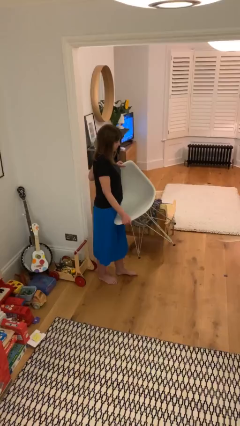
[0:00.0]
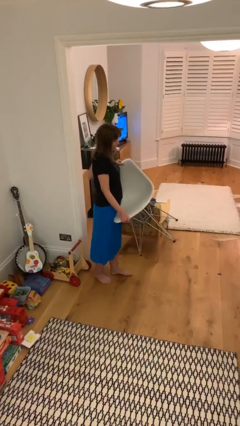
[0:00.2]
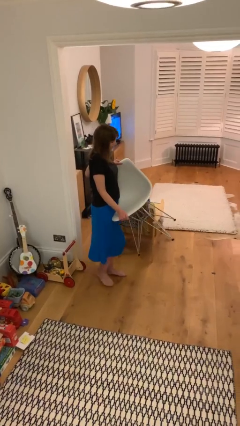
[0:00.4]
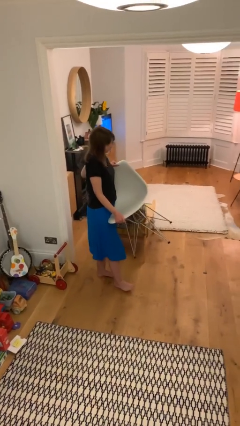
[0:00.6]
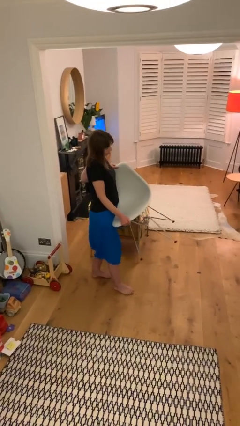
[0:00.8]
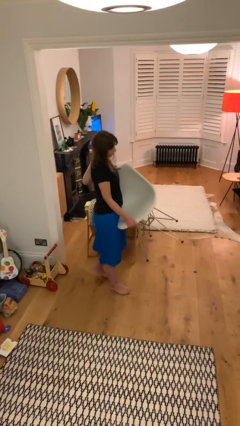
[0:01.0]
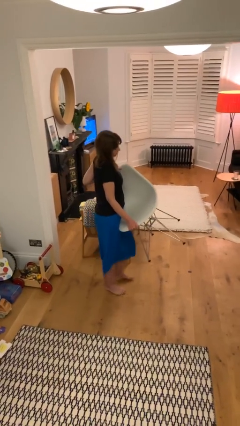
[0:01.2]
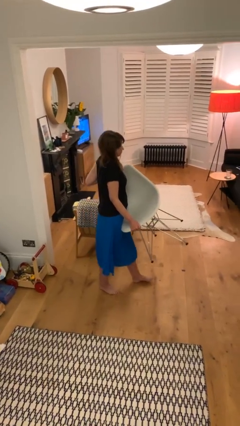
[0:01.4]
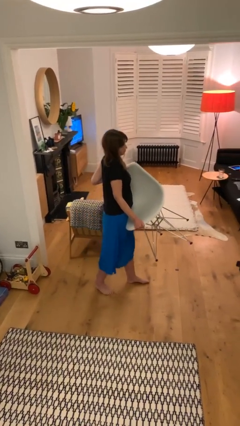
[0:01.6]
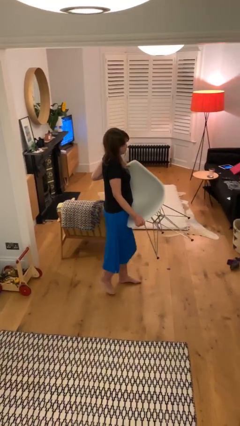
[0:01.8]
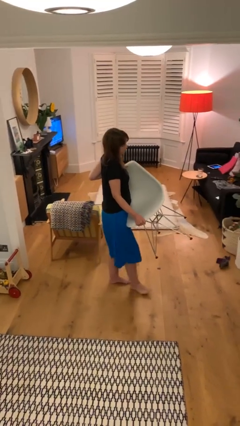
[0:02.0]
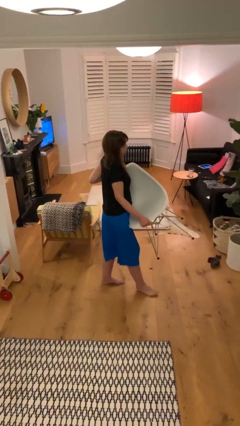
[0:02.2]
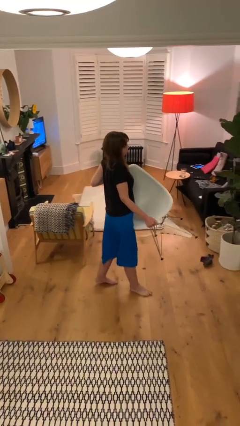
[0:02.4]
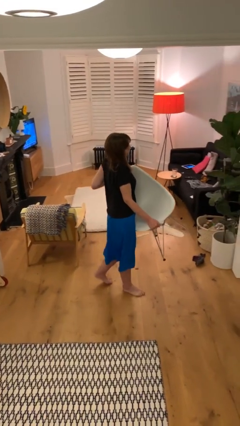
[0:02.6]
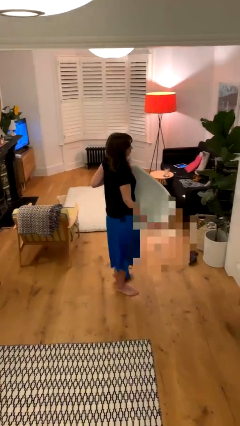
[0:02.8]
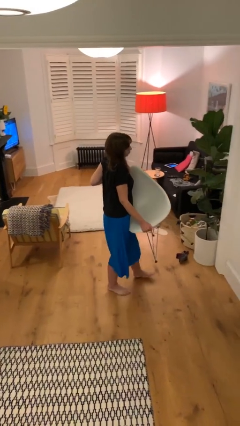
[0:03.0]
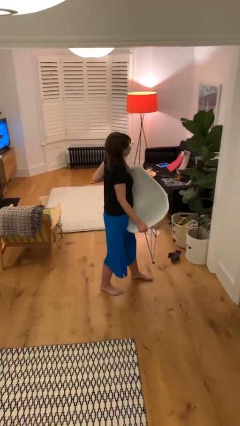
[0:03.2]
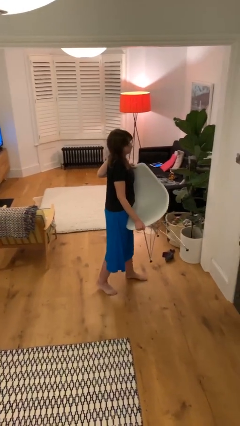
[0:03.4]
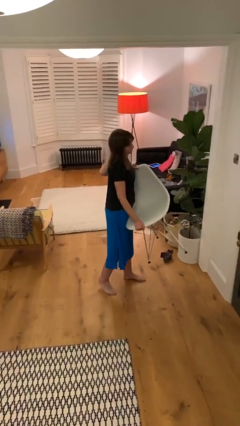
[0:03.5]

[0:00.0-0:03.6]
person carries heavy object

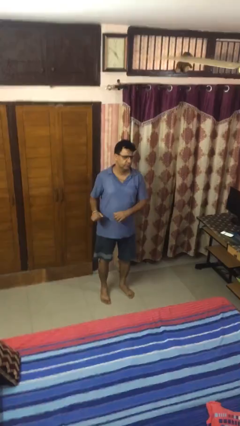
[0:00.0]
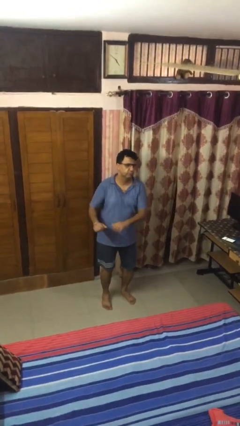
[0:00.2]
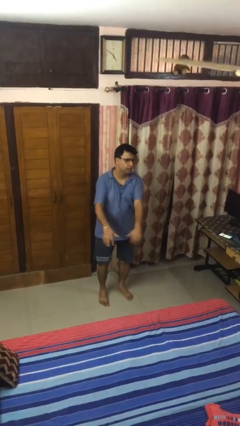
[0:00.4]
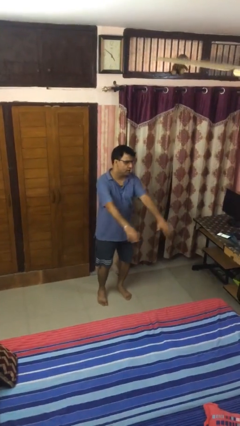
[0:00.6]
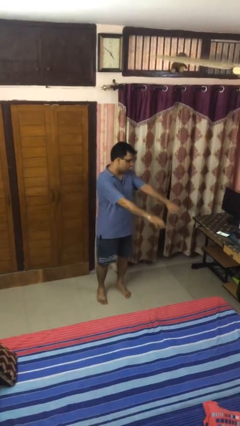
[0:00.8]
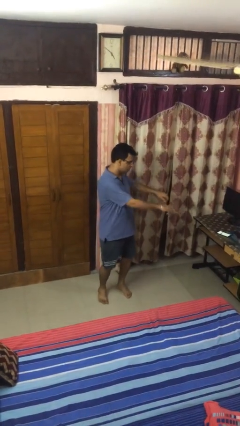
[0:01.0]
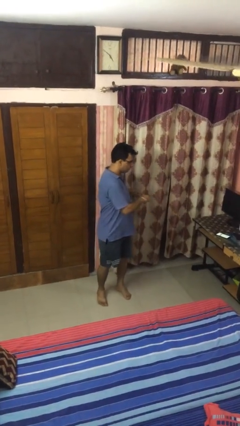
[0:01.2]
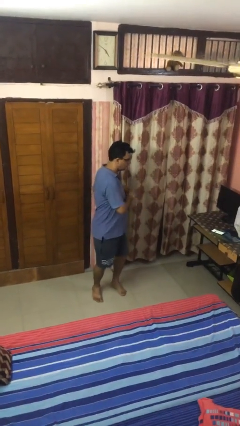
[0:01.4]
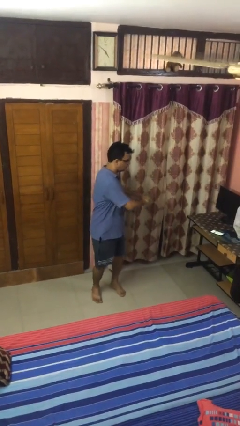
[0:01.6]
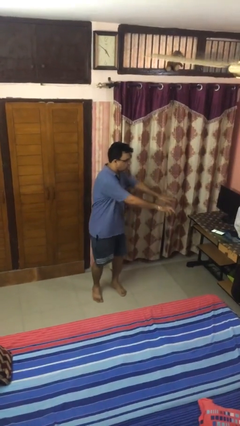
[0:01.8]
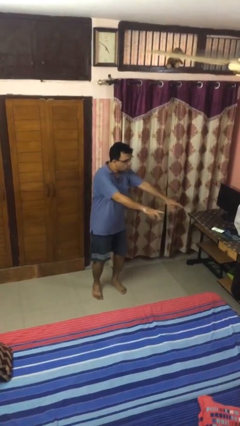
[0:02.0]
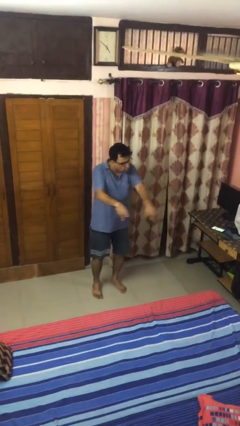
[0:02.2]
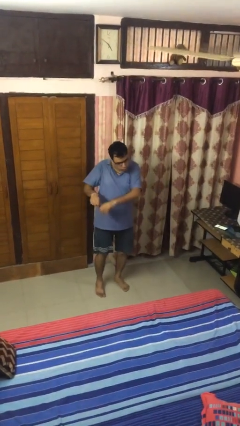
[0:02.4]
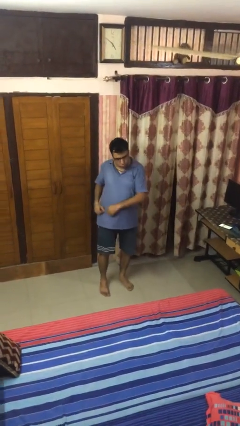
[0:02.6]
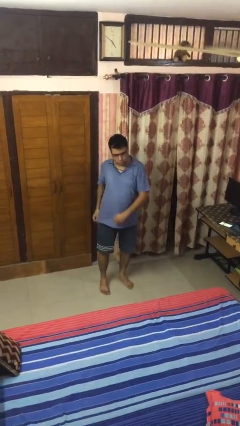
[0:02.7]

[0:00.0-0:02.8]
person dances in place

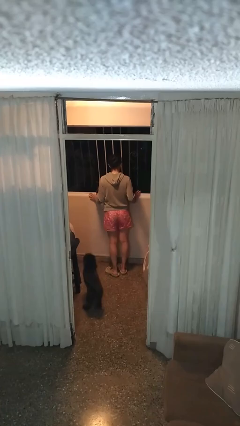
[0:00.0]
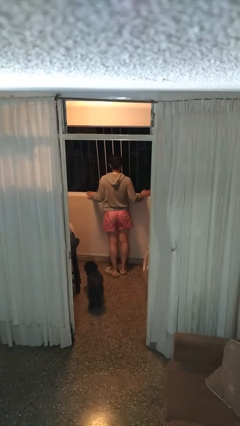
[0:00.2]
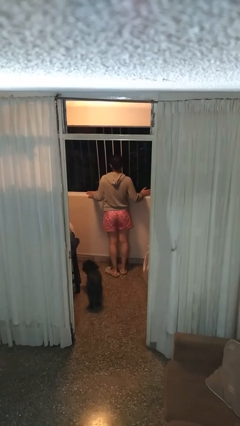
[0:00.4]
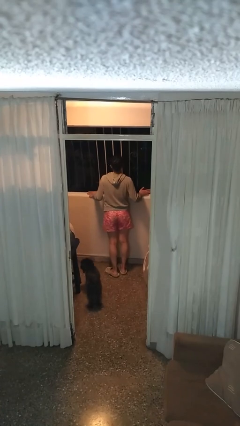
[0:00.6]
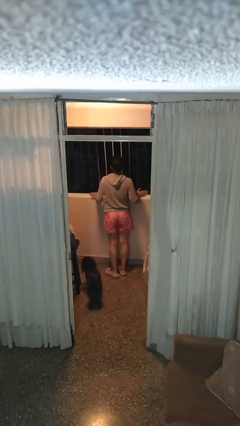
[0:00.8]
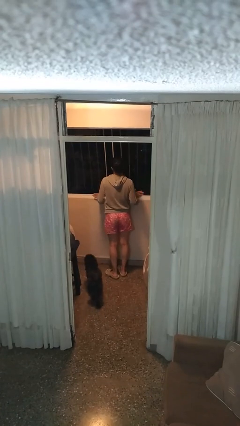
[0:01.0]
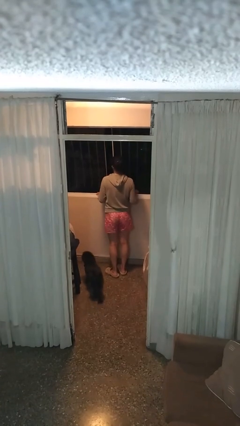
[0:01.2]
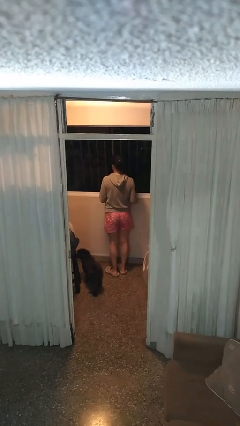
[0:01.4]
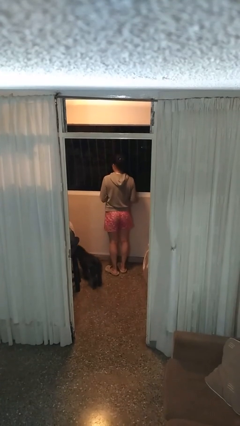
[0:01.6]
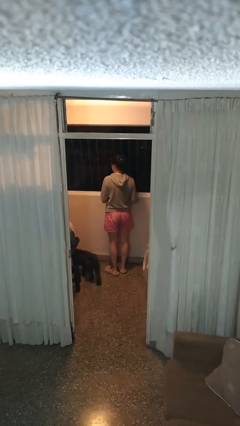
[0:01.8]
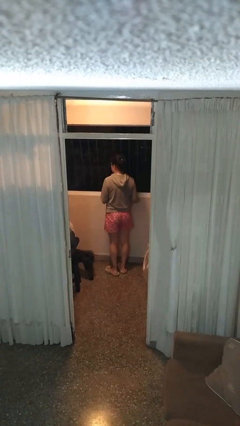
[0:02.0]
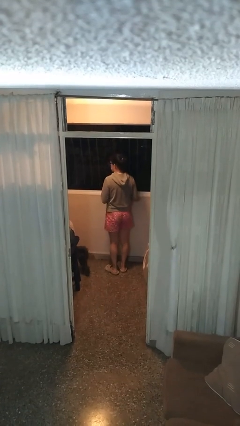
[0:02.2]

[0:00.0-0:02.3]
person closes home window

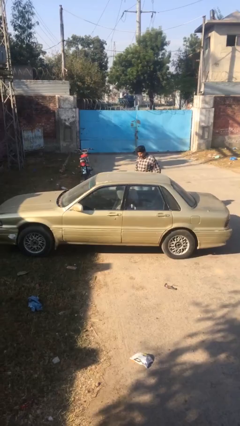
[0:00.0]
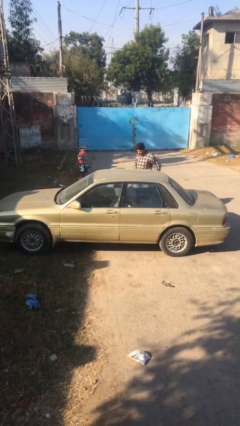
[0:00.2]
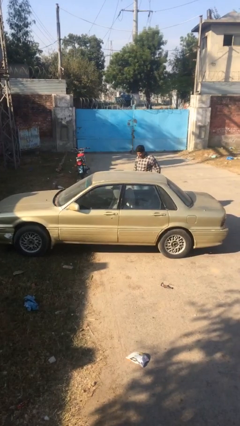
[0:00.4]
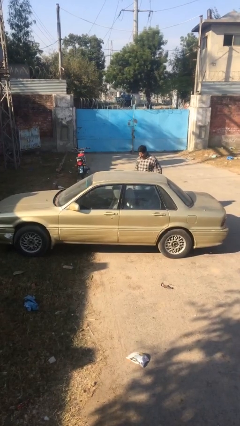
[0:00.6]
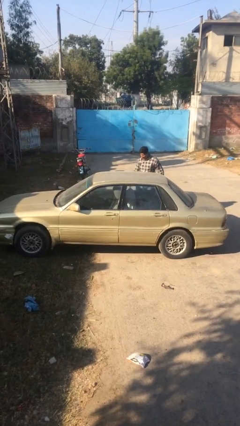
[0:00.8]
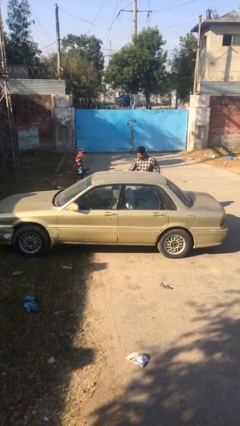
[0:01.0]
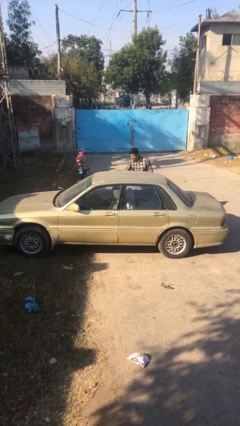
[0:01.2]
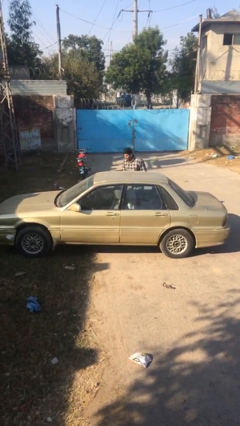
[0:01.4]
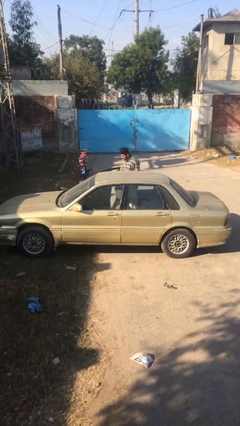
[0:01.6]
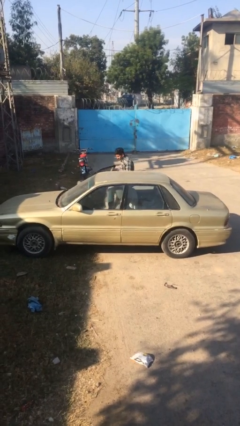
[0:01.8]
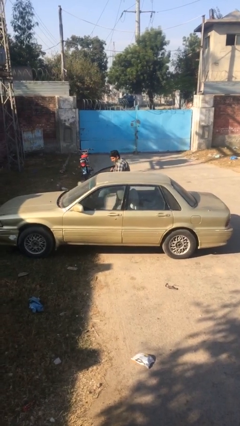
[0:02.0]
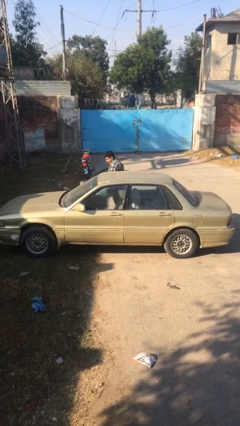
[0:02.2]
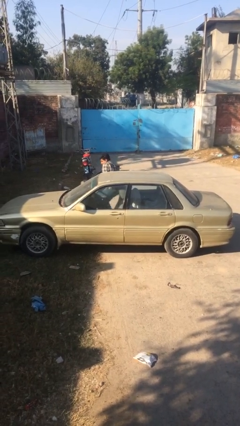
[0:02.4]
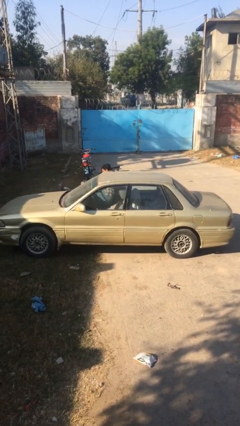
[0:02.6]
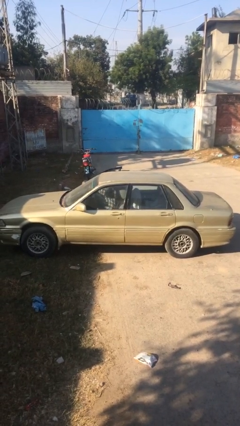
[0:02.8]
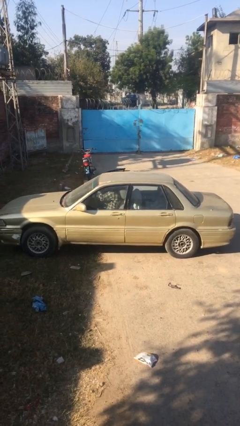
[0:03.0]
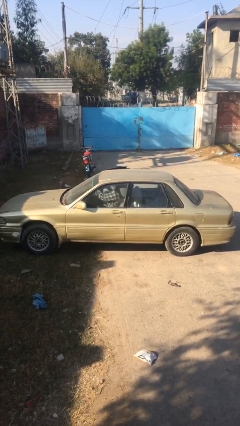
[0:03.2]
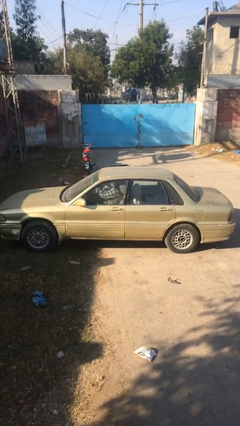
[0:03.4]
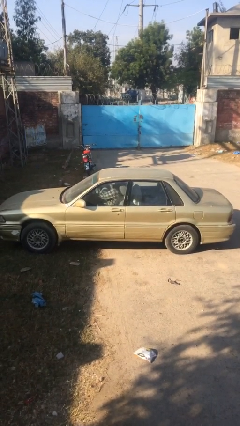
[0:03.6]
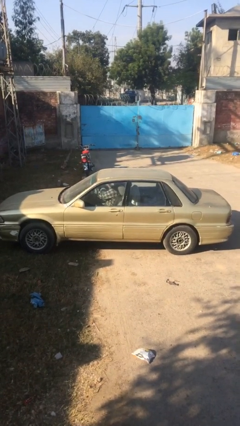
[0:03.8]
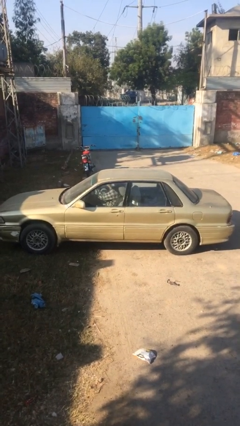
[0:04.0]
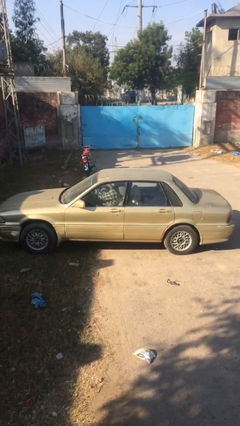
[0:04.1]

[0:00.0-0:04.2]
car picks up person

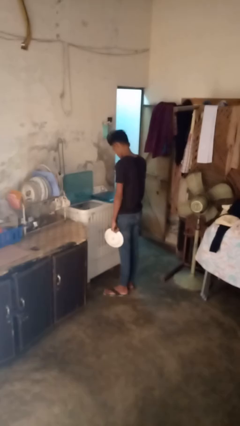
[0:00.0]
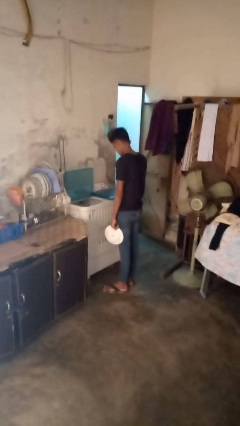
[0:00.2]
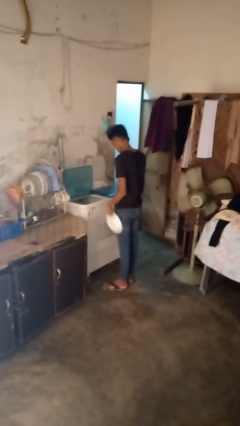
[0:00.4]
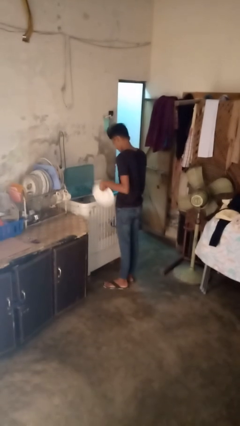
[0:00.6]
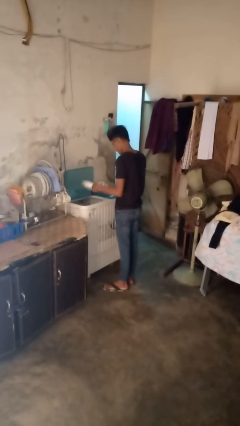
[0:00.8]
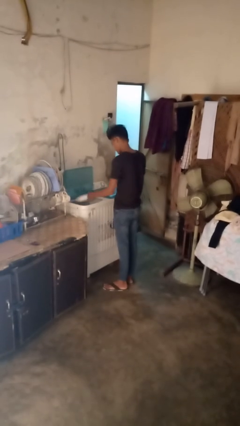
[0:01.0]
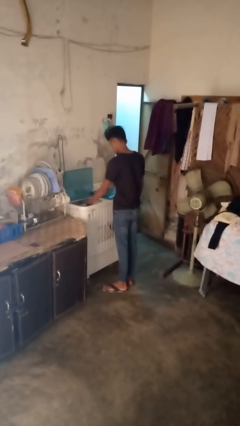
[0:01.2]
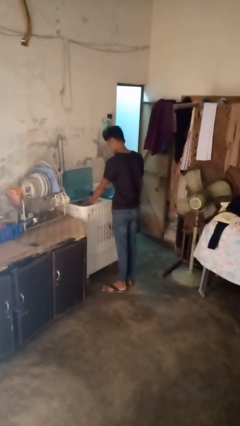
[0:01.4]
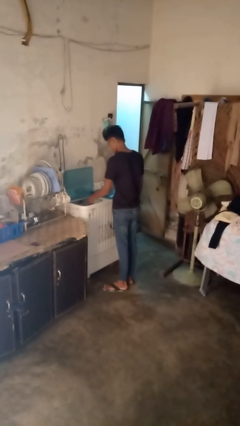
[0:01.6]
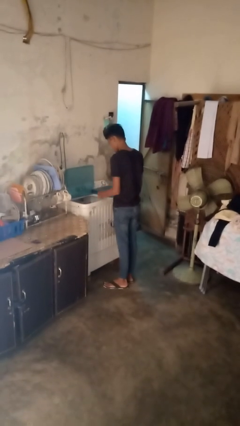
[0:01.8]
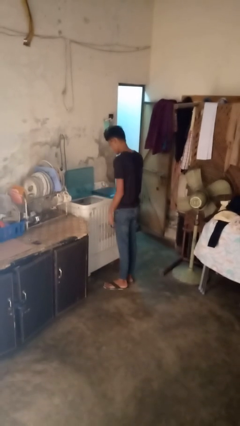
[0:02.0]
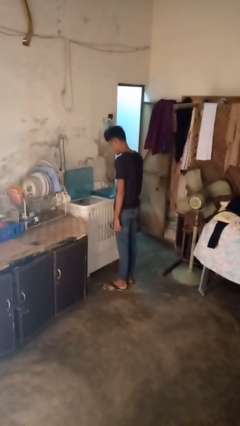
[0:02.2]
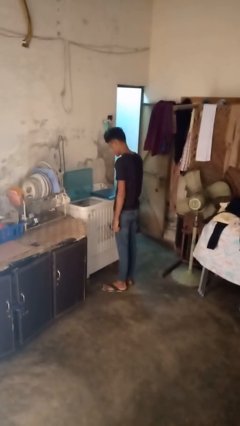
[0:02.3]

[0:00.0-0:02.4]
person loads dishwasher

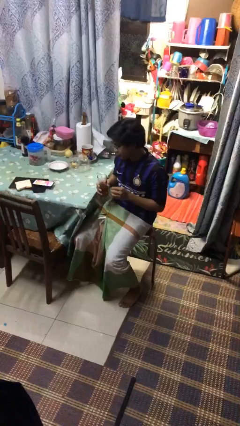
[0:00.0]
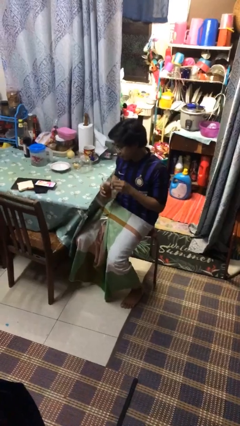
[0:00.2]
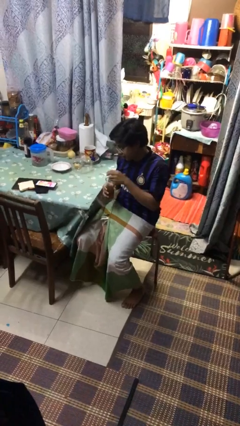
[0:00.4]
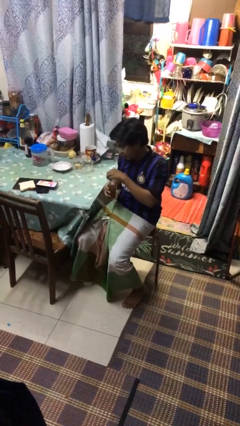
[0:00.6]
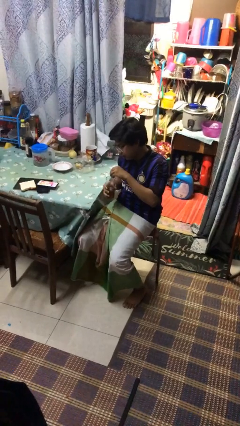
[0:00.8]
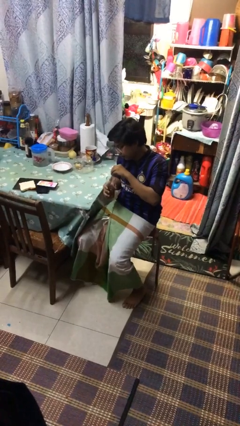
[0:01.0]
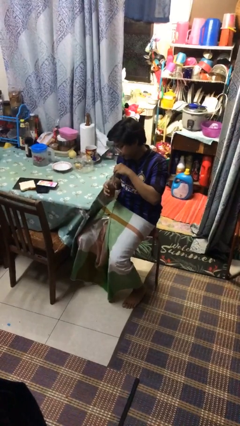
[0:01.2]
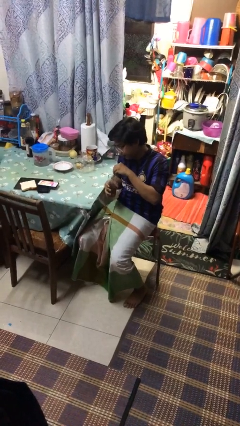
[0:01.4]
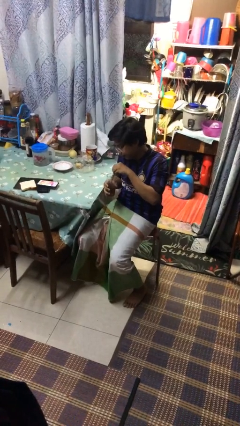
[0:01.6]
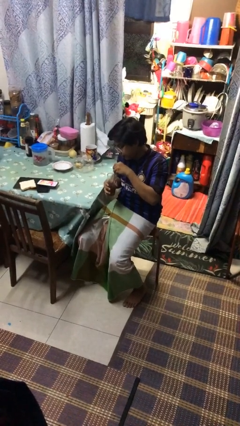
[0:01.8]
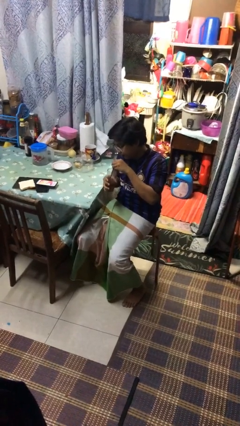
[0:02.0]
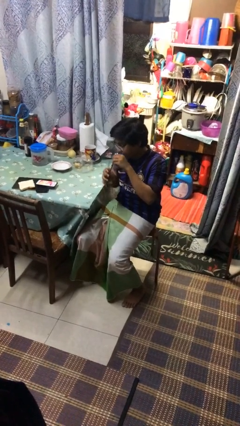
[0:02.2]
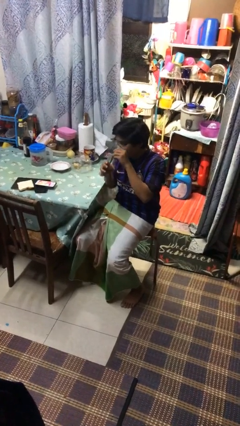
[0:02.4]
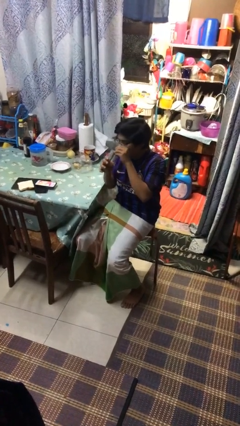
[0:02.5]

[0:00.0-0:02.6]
person stirs mug
